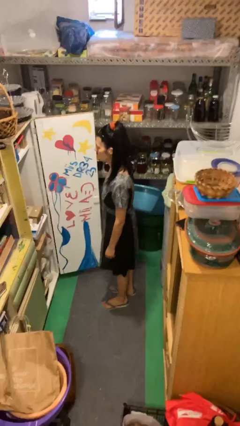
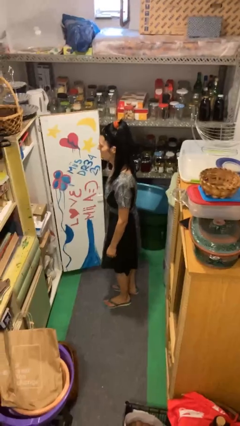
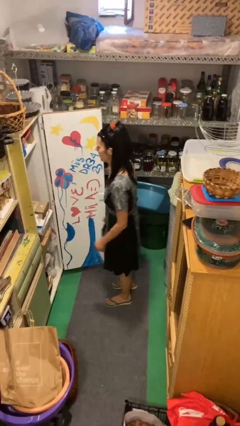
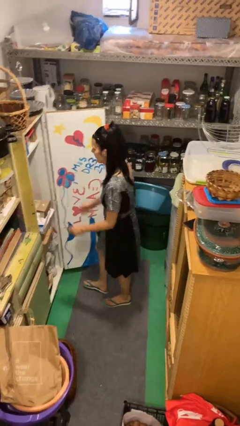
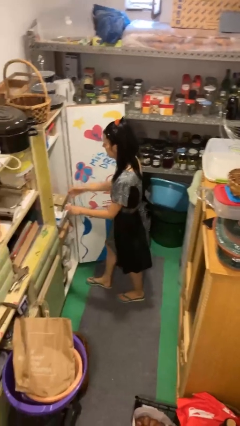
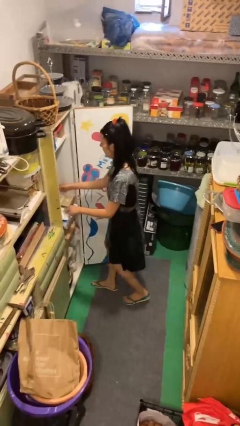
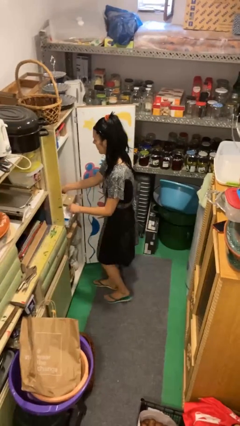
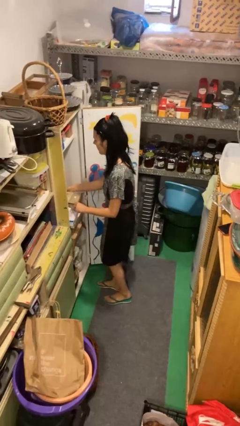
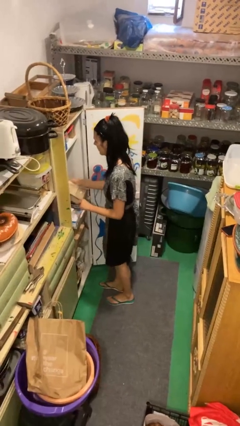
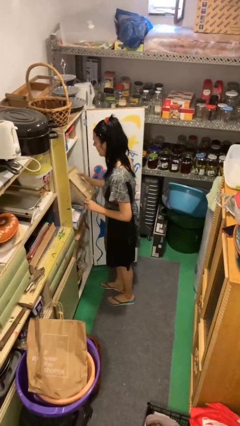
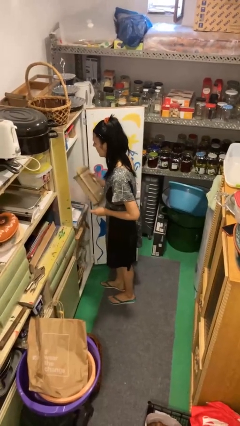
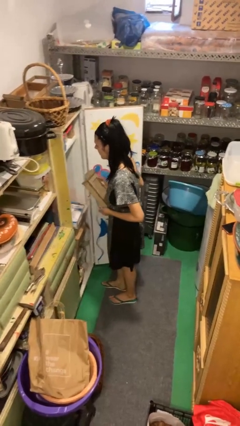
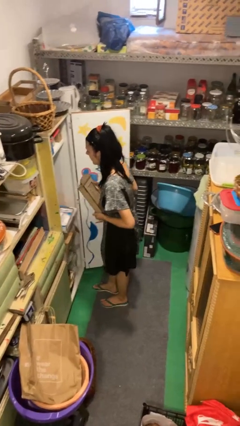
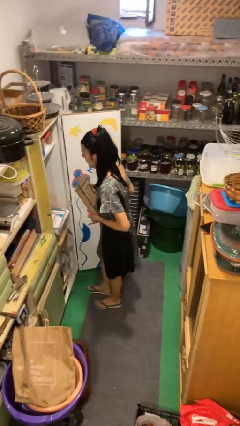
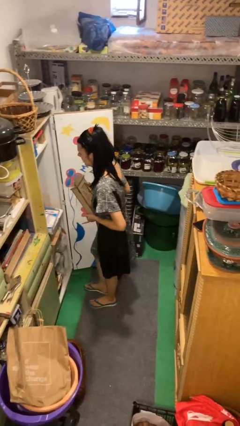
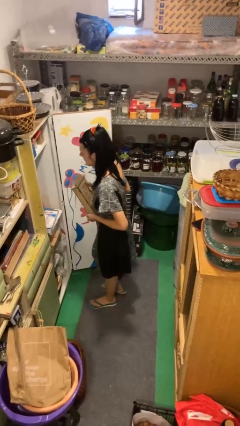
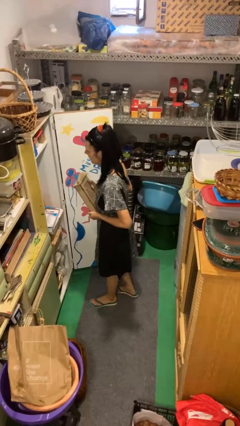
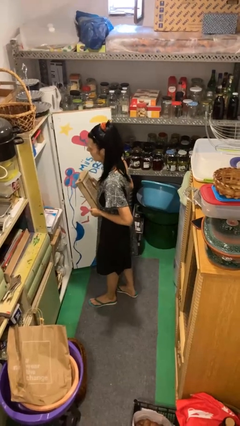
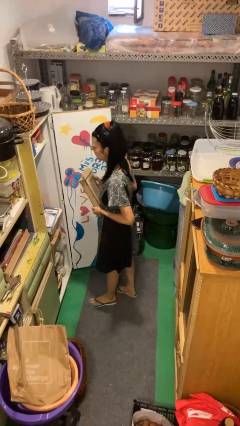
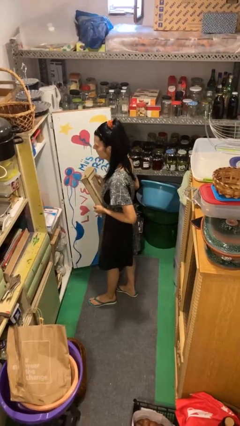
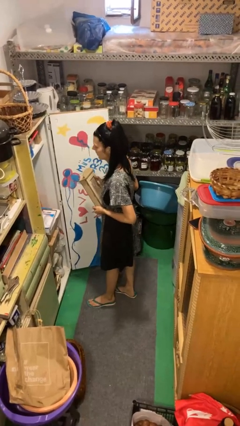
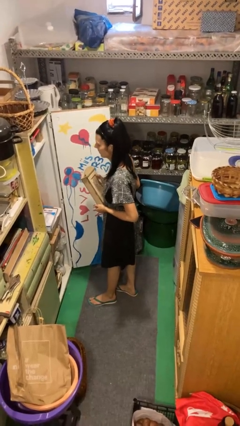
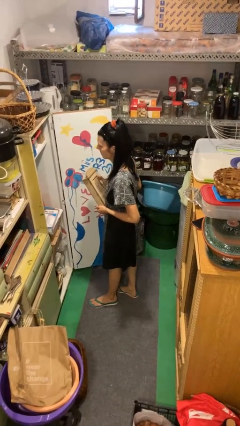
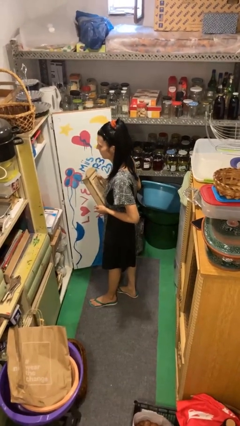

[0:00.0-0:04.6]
person picks up object from cabinet

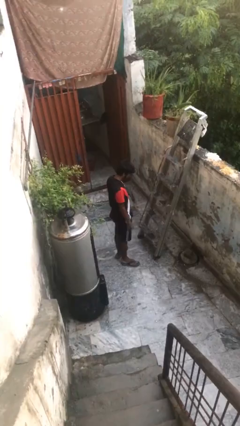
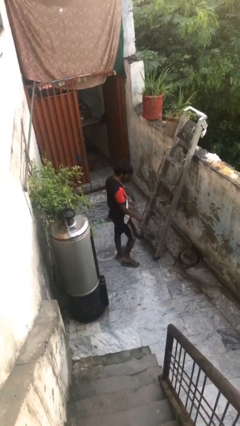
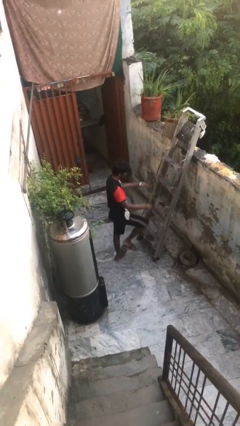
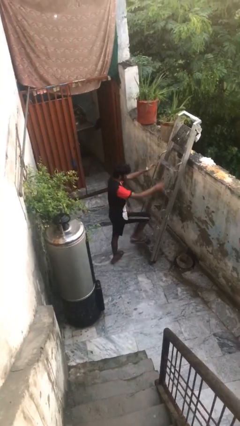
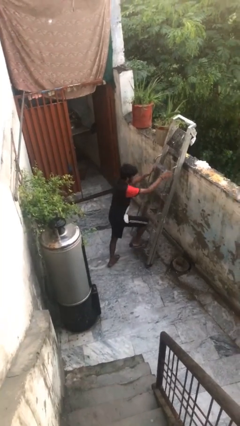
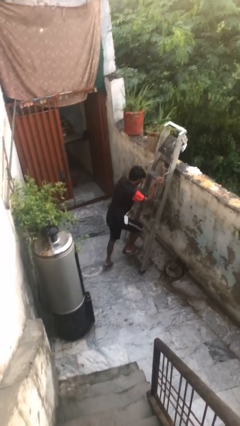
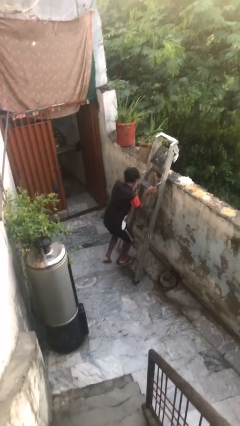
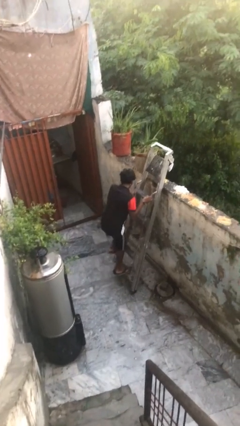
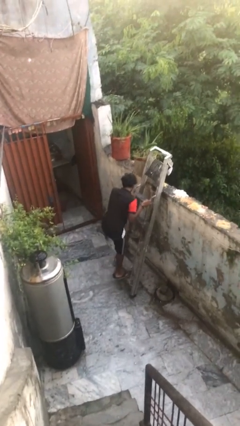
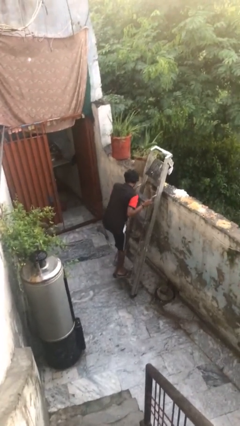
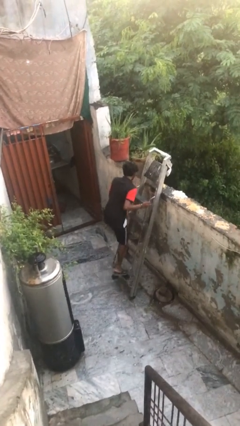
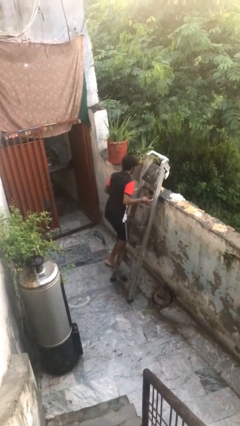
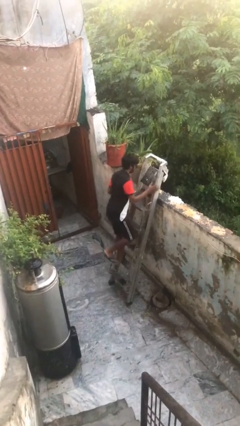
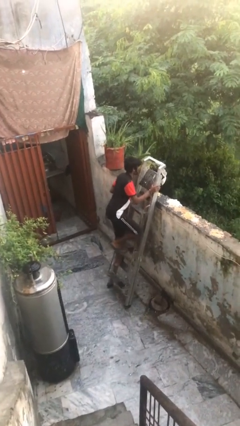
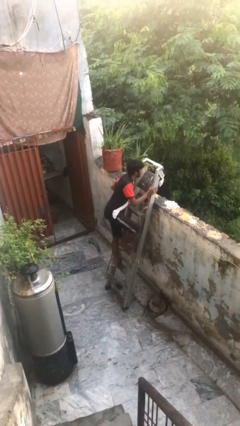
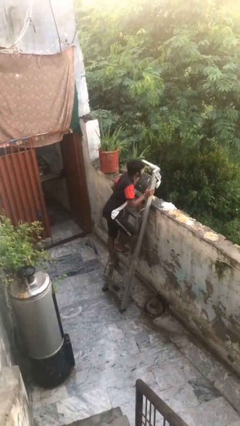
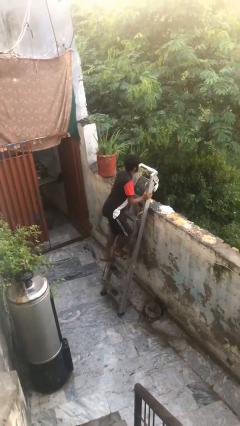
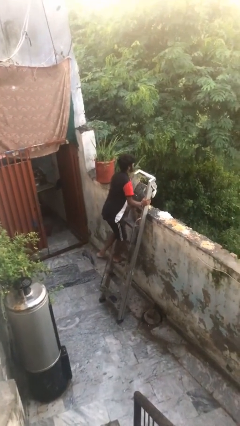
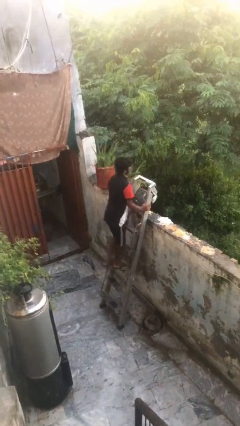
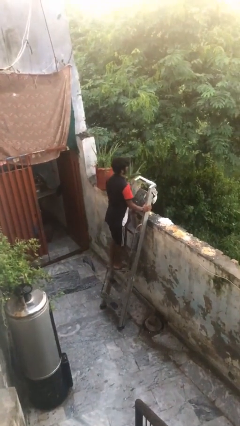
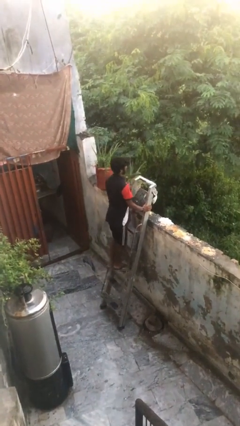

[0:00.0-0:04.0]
person climbs up ladder

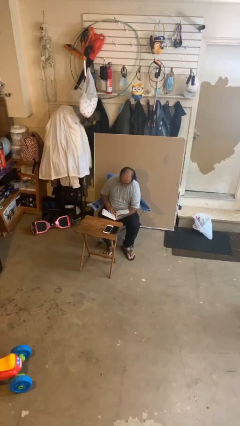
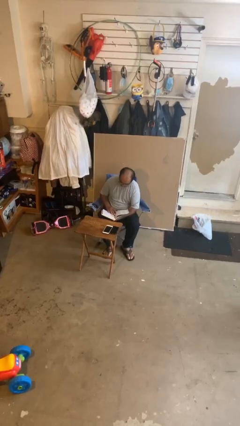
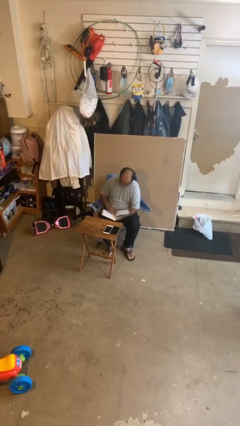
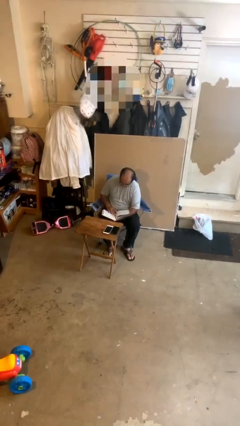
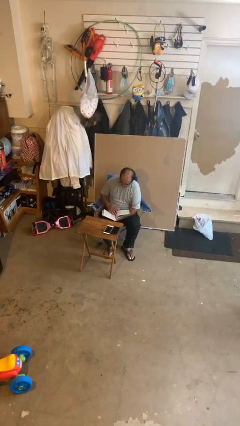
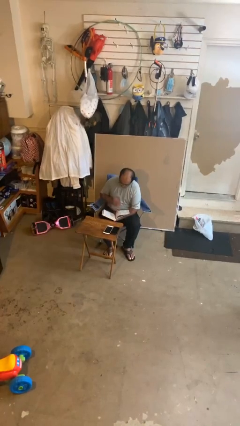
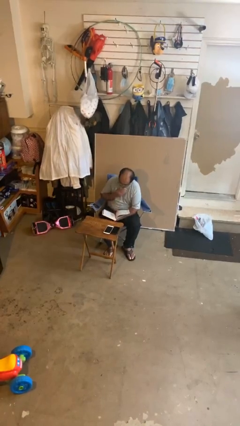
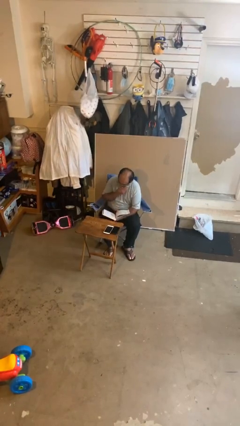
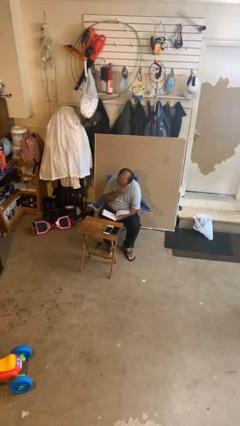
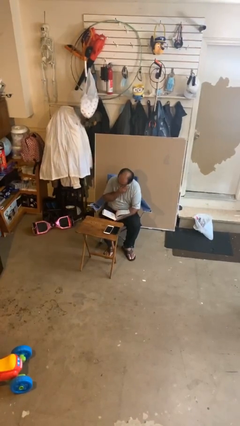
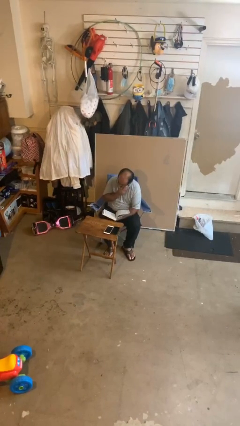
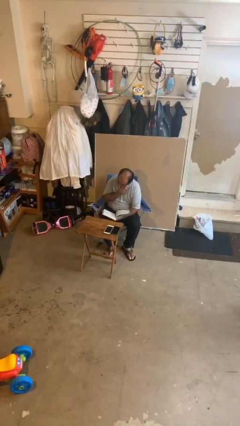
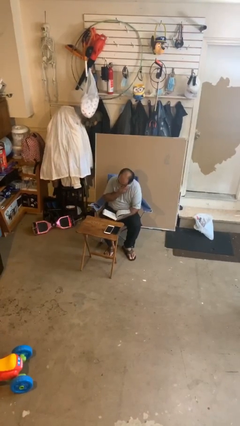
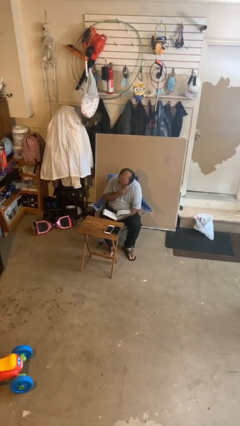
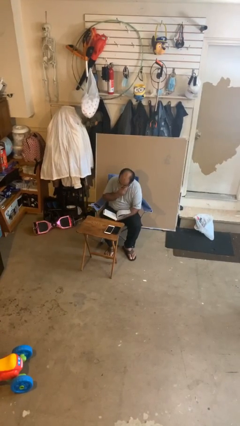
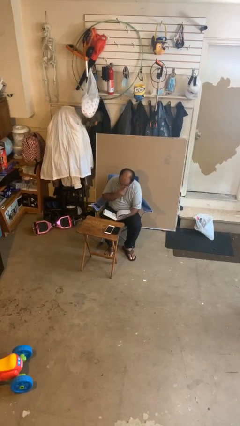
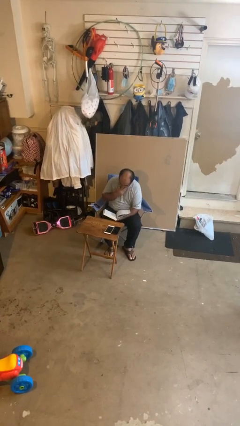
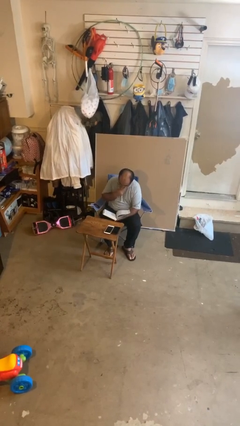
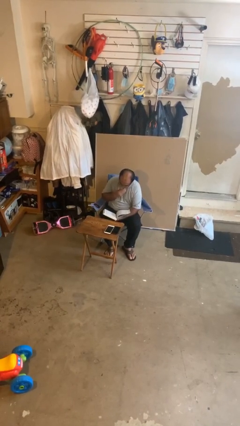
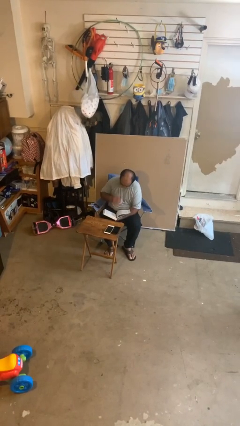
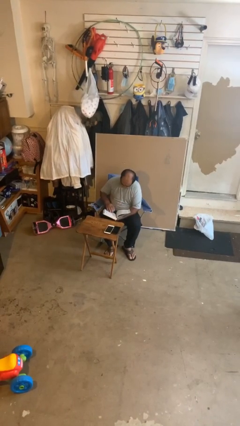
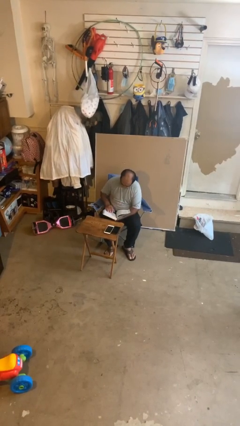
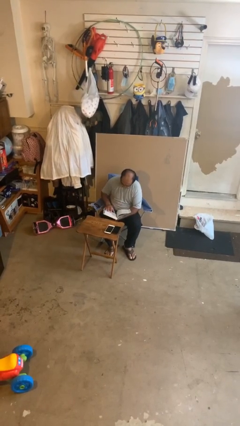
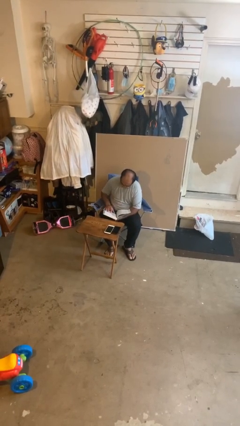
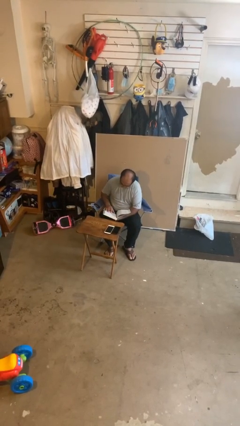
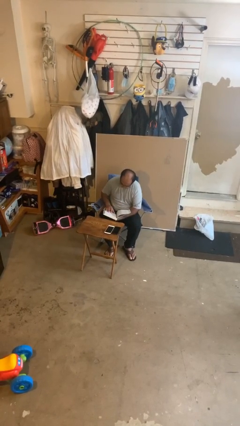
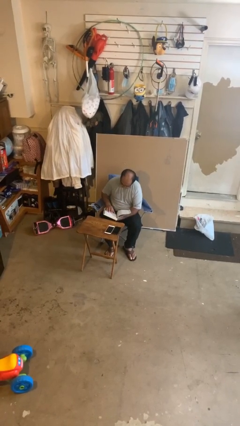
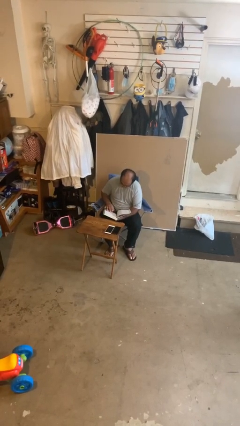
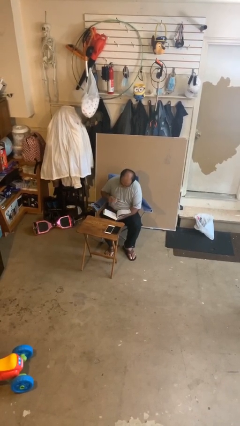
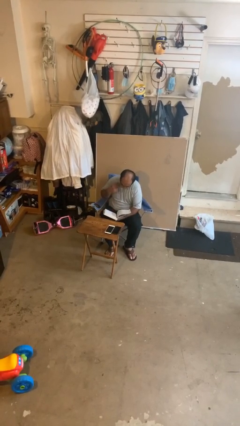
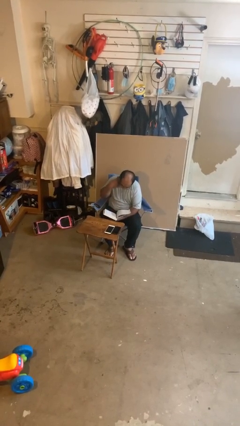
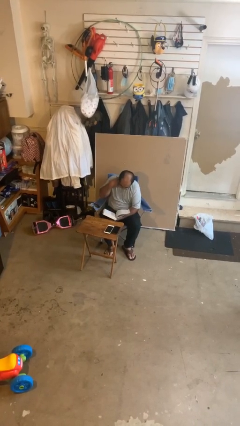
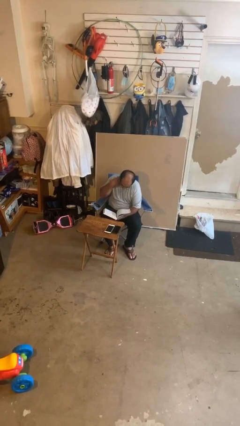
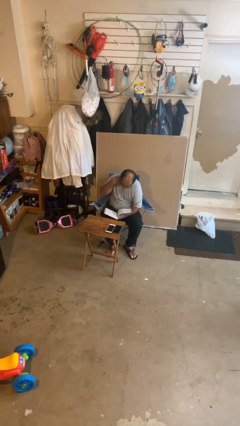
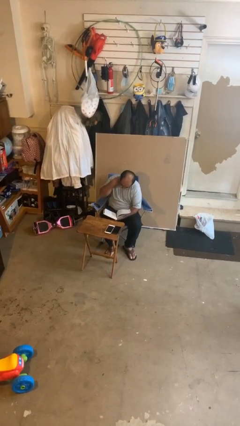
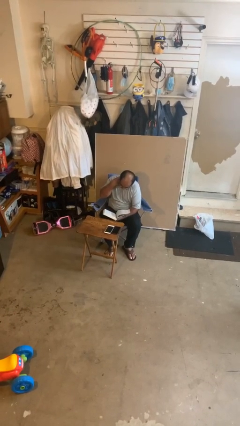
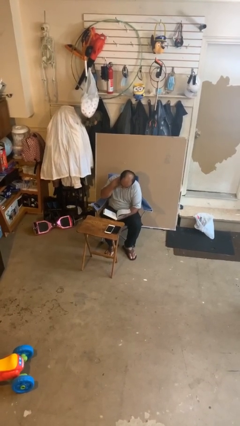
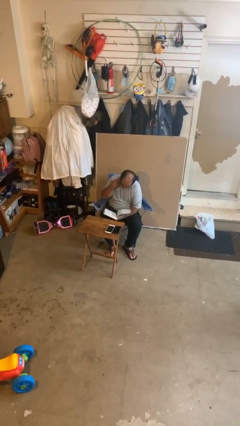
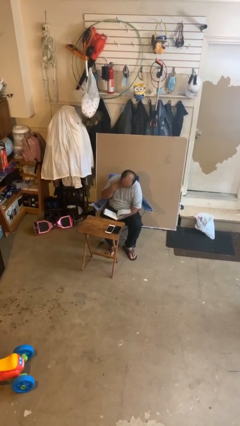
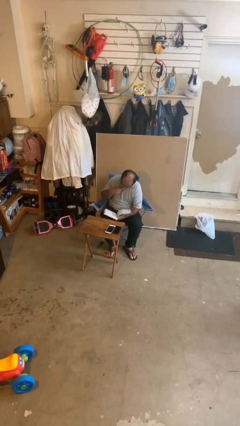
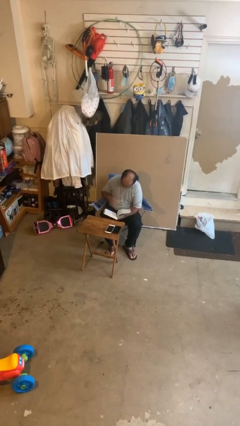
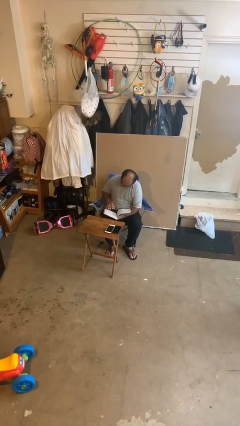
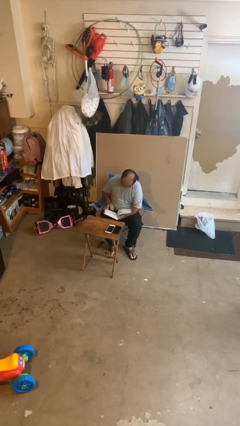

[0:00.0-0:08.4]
person reads document

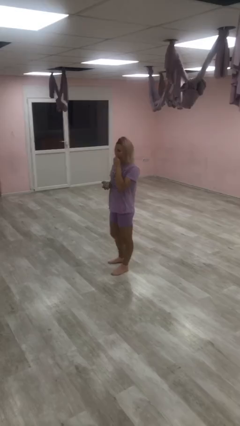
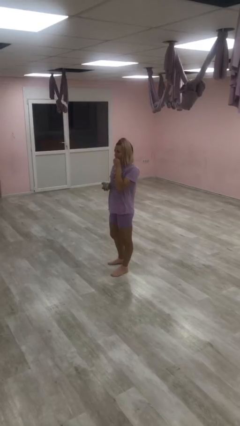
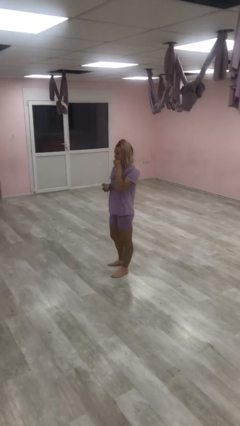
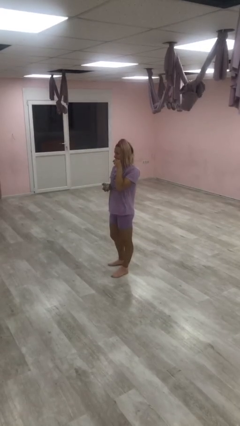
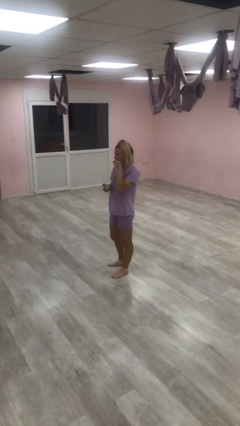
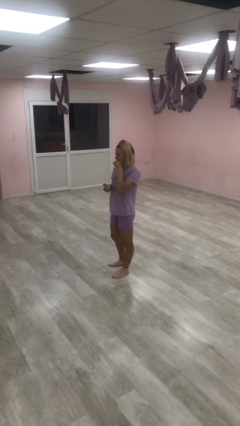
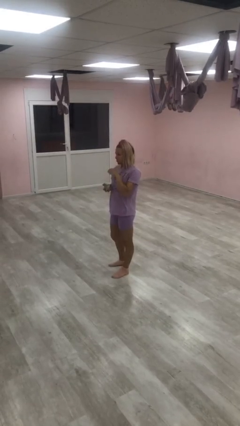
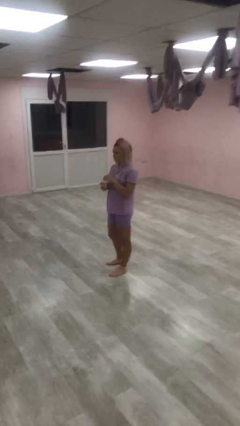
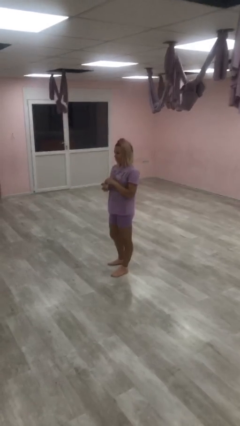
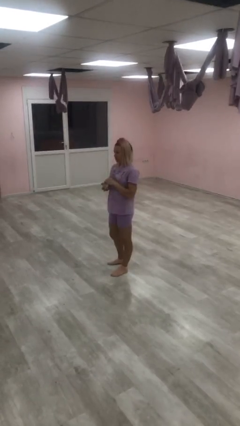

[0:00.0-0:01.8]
person eats snack from bag
